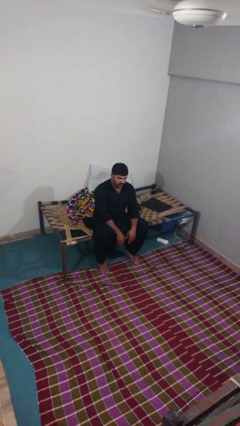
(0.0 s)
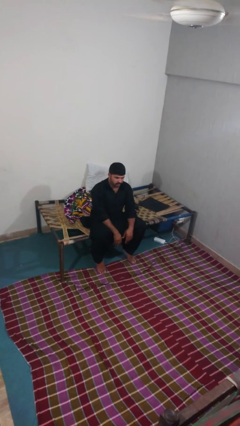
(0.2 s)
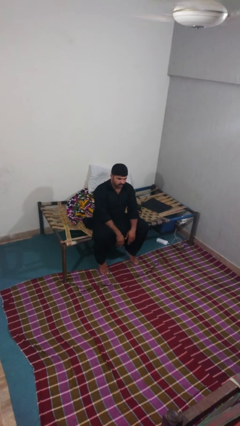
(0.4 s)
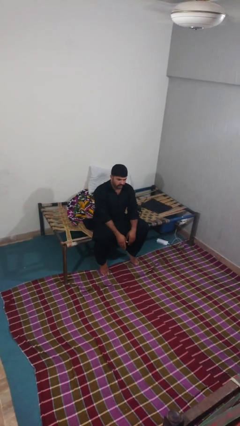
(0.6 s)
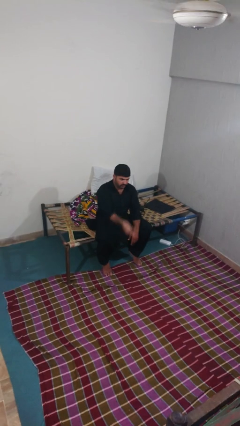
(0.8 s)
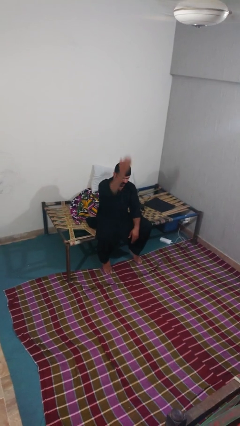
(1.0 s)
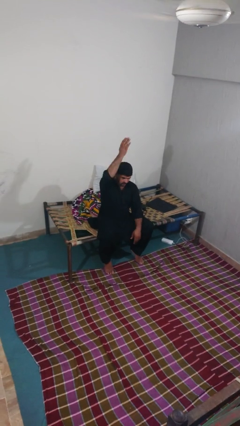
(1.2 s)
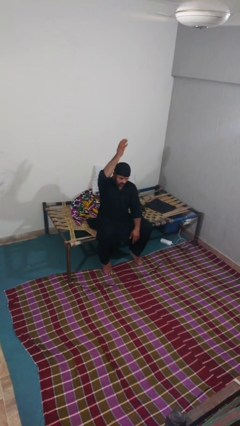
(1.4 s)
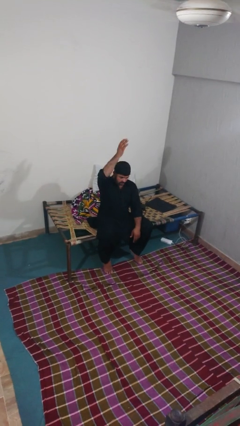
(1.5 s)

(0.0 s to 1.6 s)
person gestures swipe up

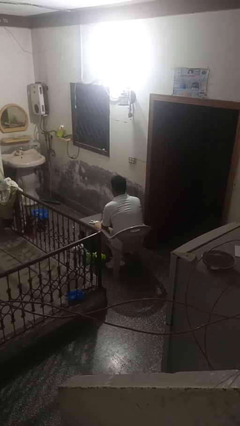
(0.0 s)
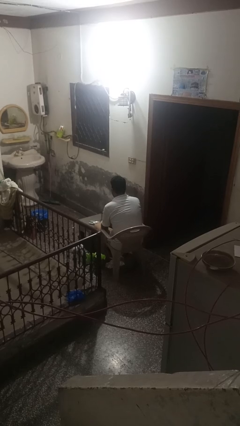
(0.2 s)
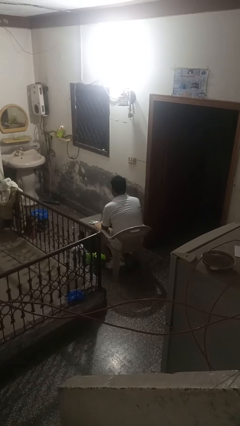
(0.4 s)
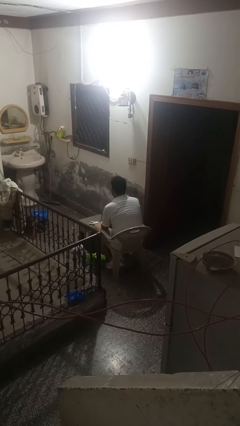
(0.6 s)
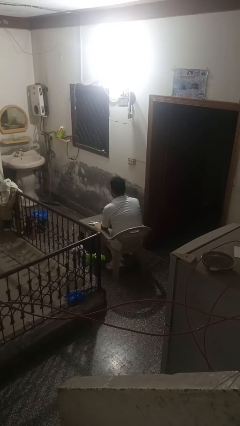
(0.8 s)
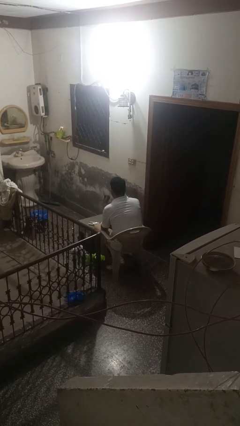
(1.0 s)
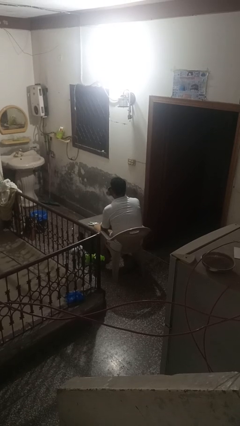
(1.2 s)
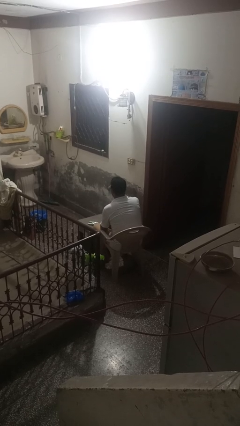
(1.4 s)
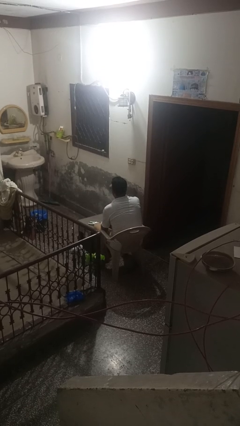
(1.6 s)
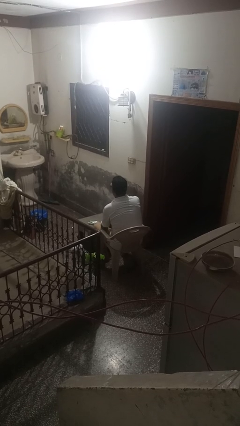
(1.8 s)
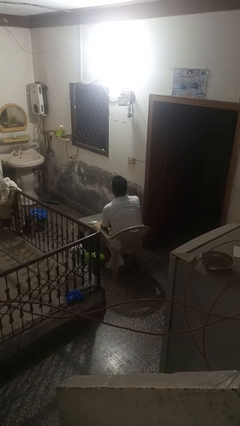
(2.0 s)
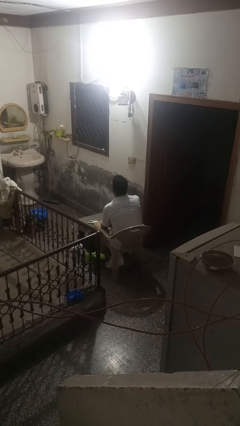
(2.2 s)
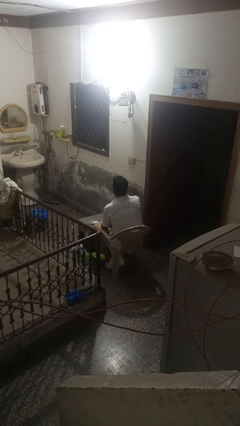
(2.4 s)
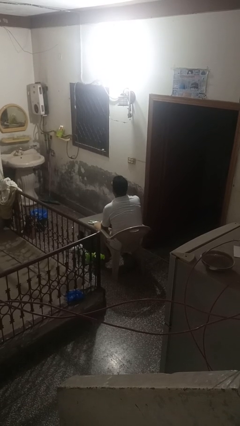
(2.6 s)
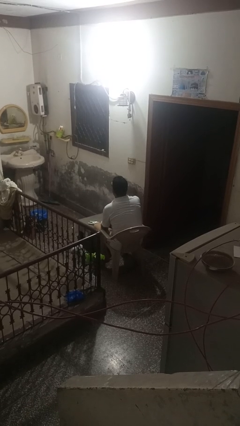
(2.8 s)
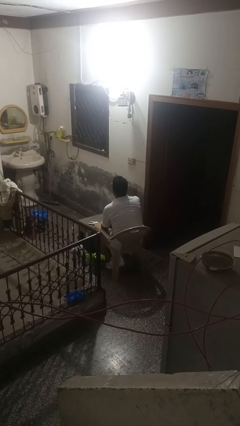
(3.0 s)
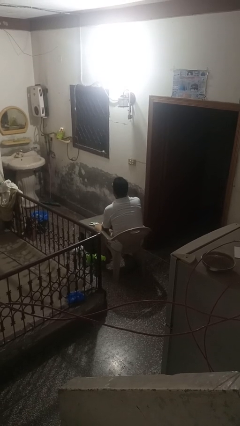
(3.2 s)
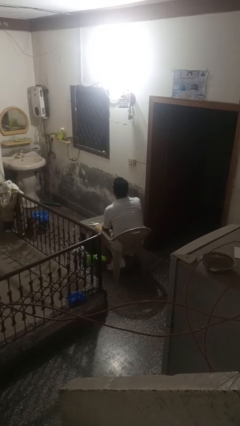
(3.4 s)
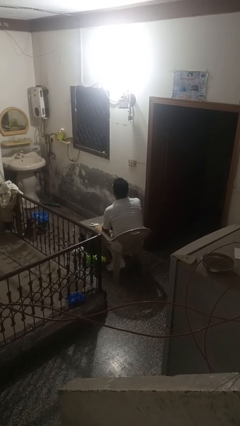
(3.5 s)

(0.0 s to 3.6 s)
person drinks from cup

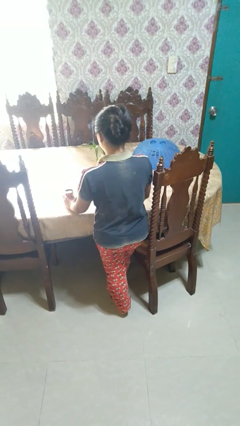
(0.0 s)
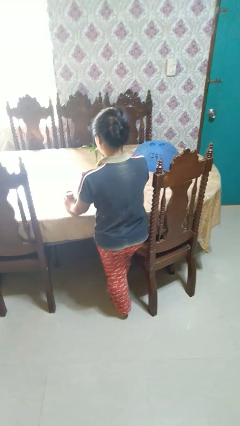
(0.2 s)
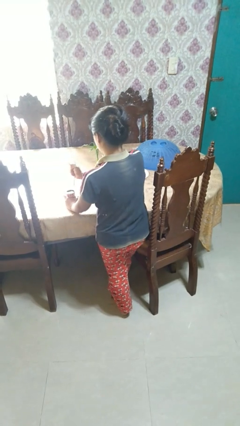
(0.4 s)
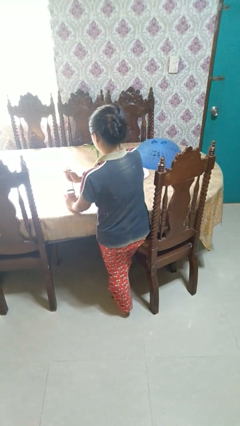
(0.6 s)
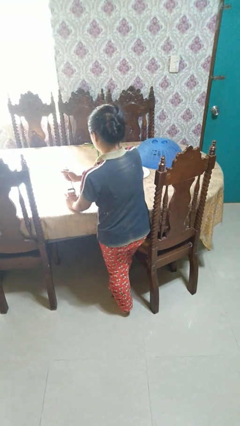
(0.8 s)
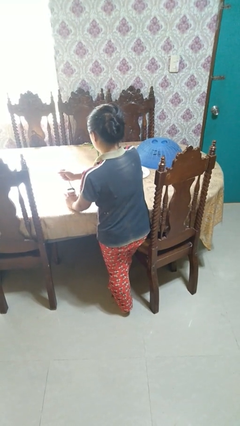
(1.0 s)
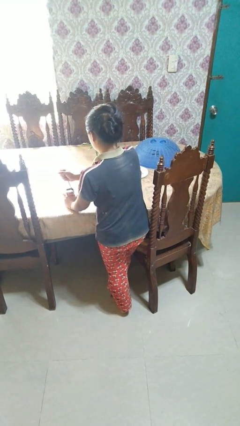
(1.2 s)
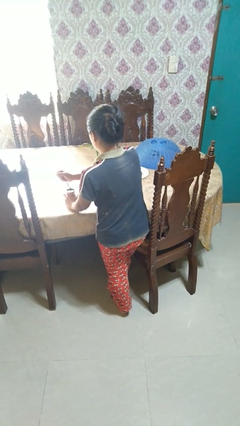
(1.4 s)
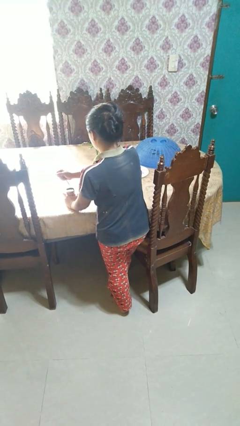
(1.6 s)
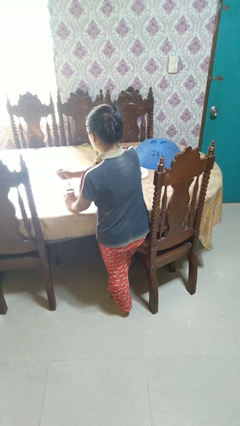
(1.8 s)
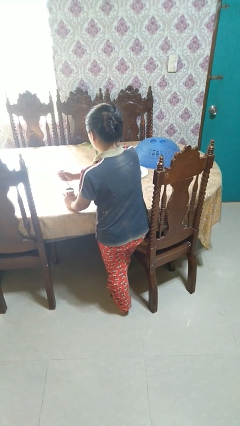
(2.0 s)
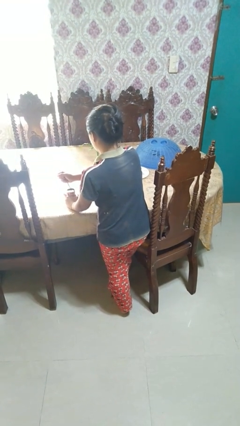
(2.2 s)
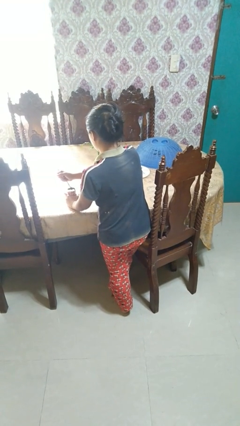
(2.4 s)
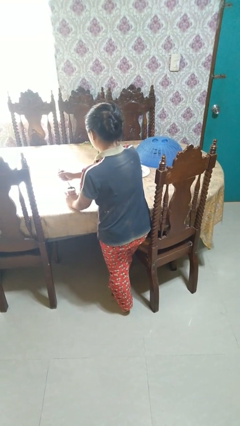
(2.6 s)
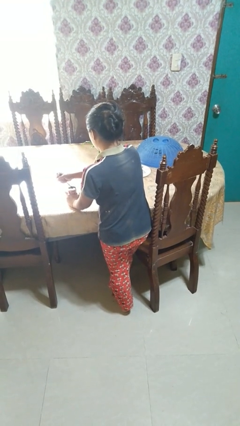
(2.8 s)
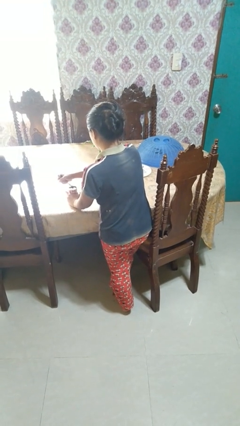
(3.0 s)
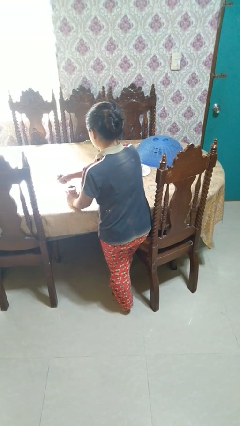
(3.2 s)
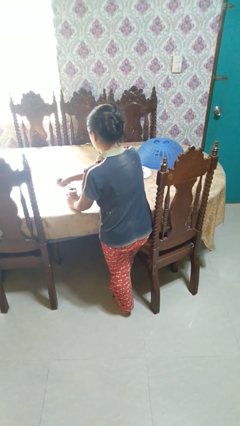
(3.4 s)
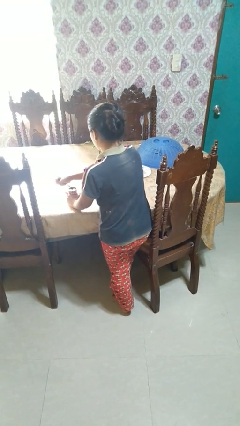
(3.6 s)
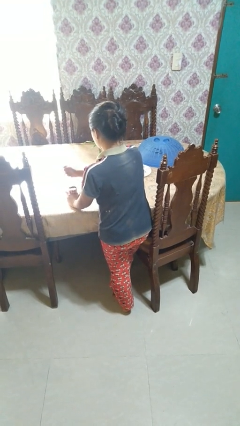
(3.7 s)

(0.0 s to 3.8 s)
person opens can with can opener

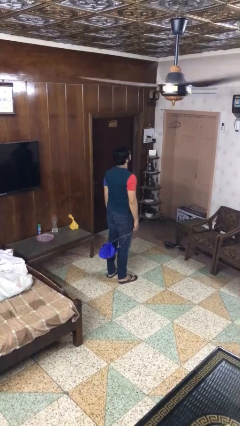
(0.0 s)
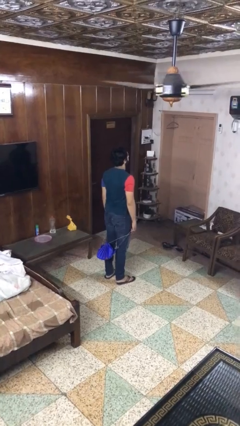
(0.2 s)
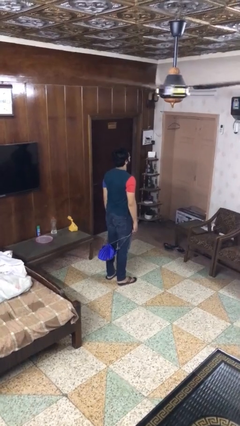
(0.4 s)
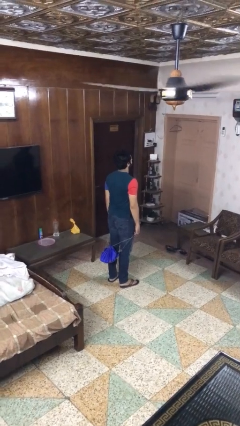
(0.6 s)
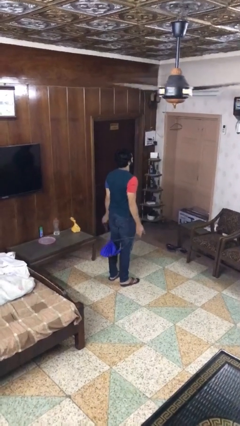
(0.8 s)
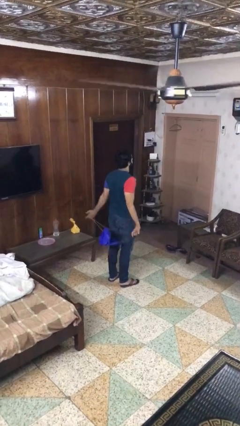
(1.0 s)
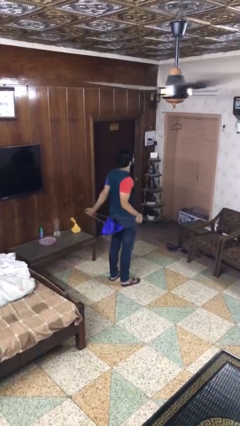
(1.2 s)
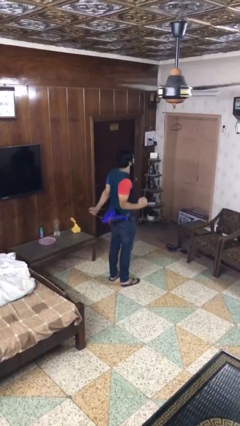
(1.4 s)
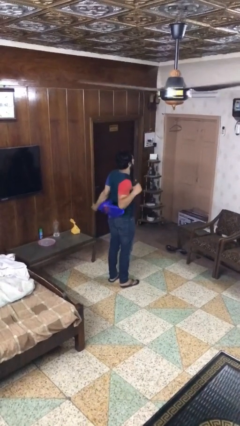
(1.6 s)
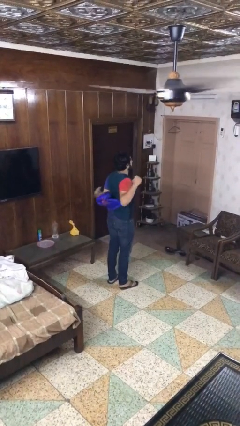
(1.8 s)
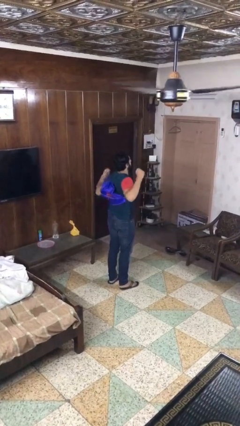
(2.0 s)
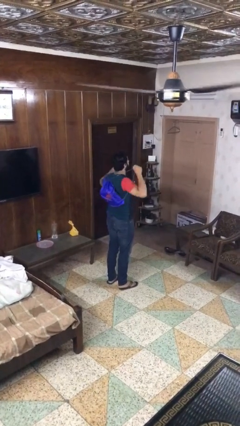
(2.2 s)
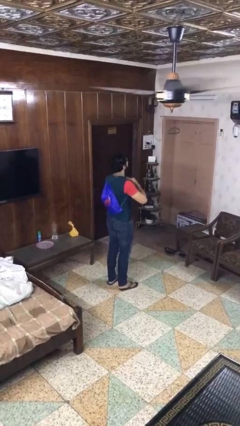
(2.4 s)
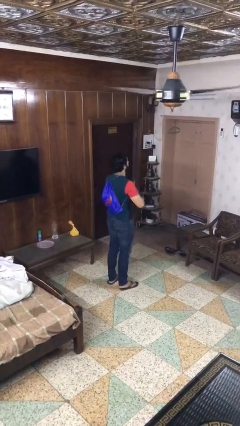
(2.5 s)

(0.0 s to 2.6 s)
person puts on backpack

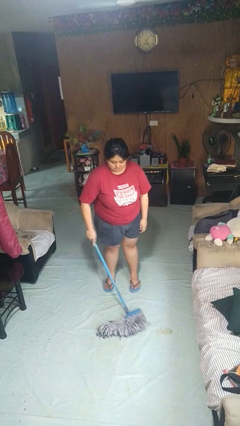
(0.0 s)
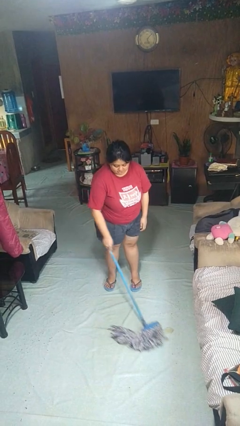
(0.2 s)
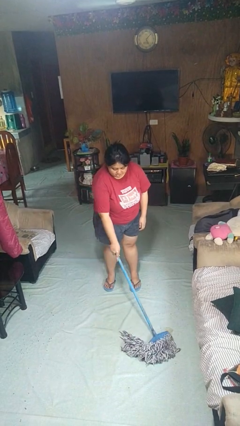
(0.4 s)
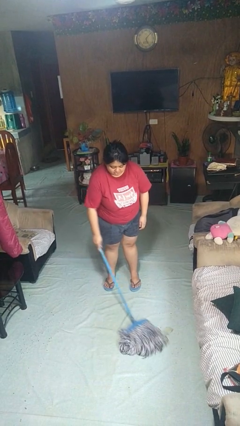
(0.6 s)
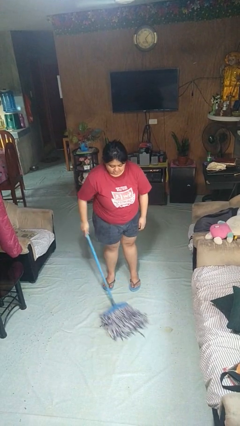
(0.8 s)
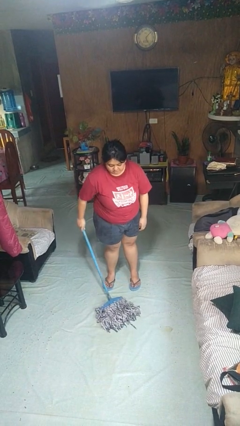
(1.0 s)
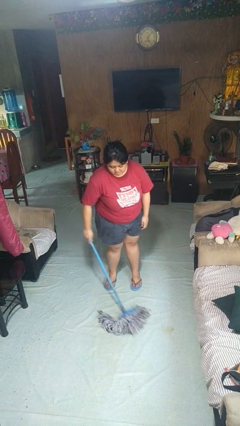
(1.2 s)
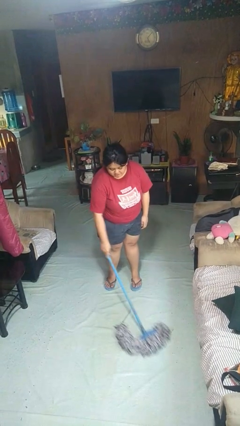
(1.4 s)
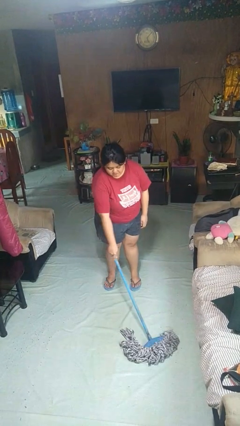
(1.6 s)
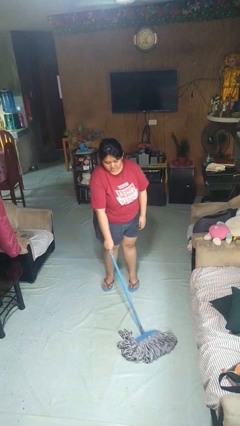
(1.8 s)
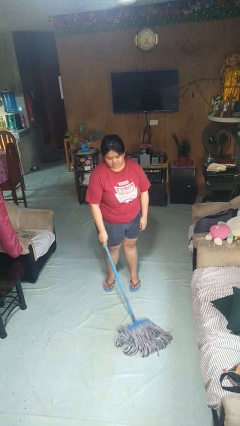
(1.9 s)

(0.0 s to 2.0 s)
person mops

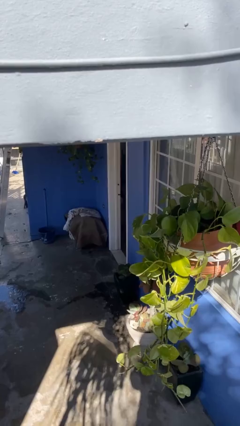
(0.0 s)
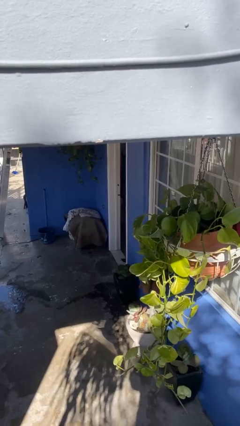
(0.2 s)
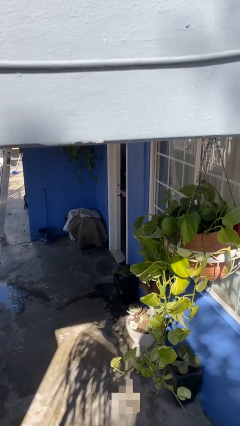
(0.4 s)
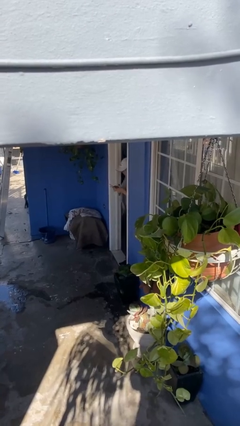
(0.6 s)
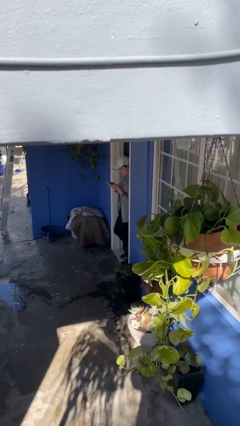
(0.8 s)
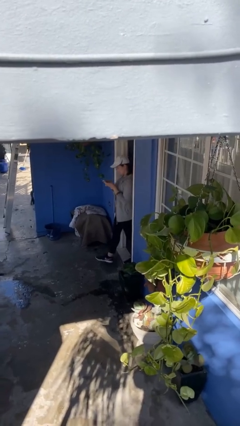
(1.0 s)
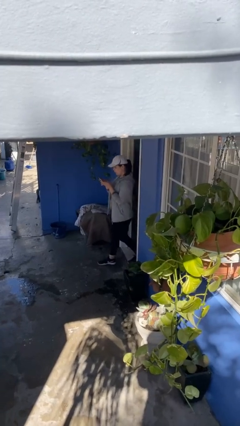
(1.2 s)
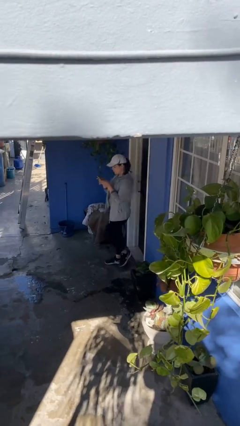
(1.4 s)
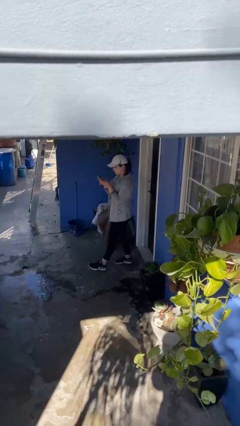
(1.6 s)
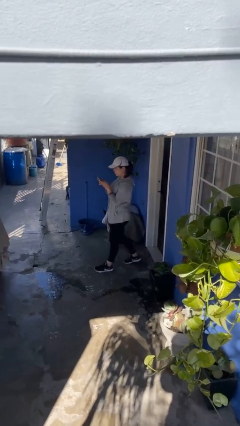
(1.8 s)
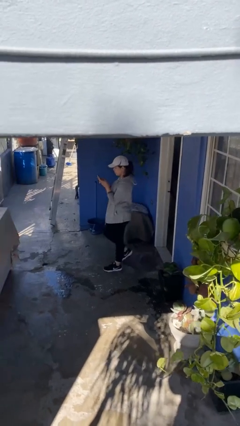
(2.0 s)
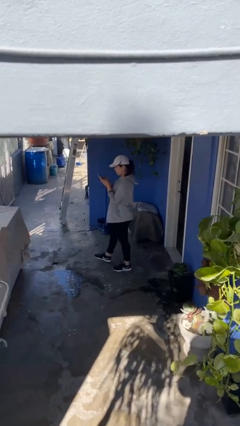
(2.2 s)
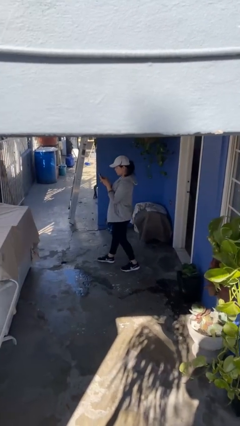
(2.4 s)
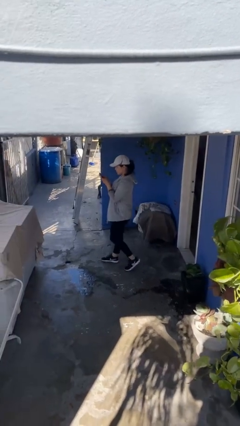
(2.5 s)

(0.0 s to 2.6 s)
person enters scene through structure

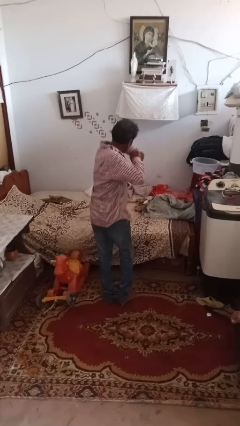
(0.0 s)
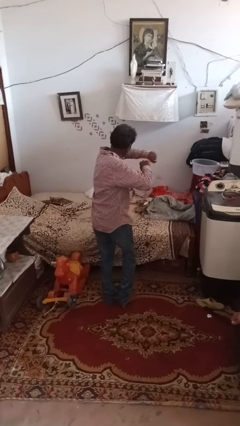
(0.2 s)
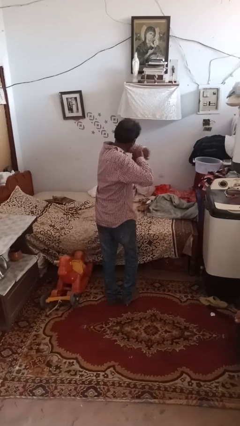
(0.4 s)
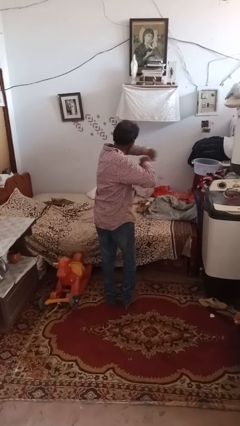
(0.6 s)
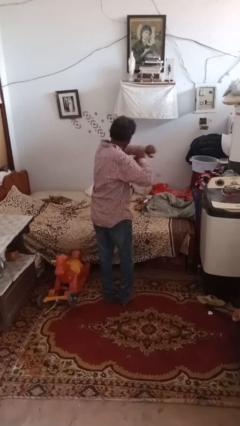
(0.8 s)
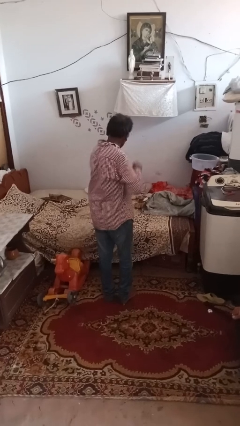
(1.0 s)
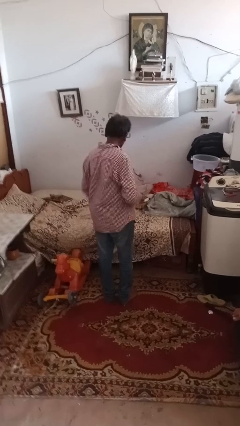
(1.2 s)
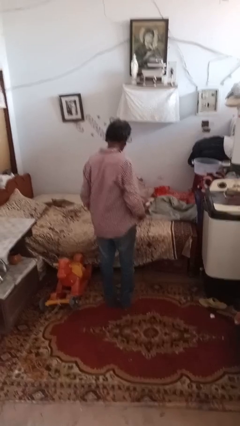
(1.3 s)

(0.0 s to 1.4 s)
person dances in place
